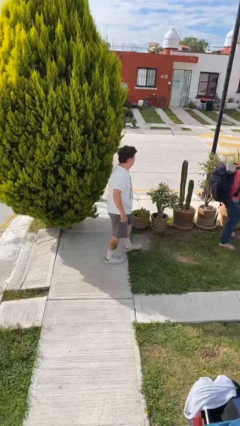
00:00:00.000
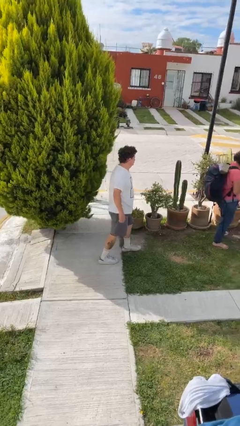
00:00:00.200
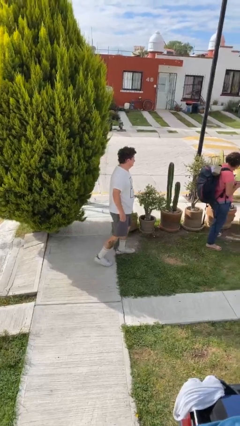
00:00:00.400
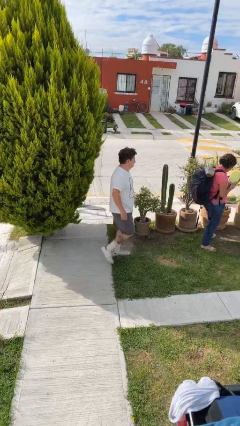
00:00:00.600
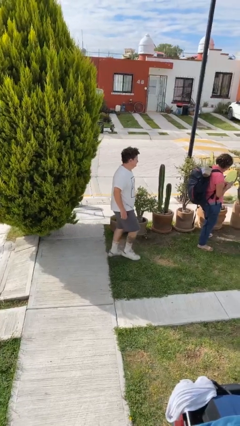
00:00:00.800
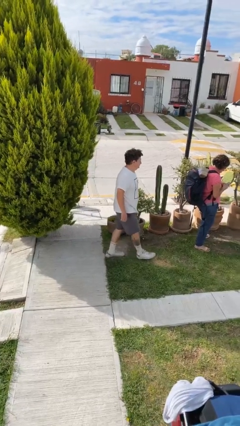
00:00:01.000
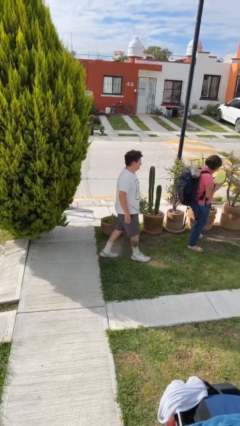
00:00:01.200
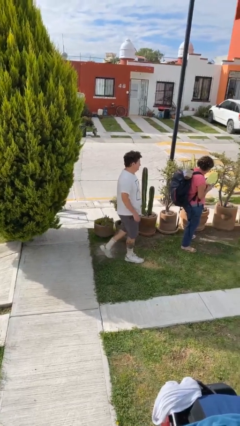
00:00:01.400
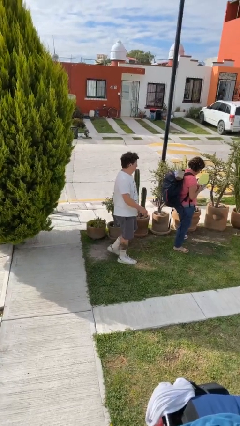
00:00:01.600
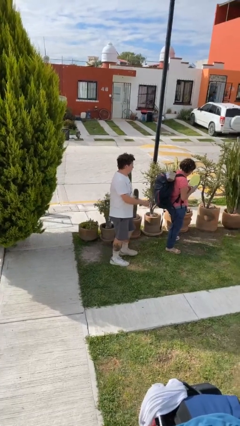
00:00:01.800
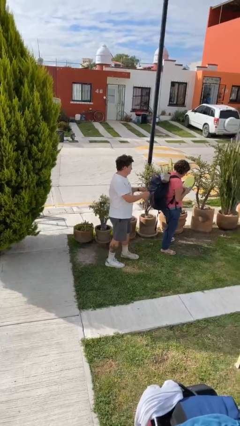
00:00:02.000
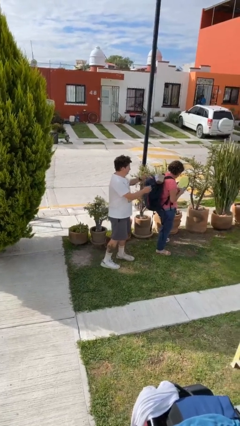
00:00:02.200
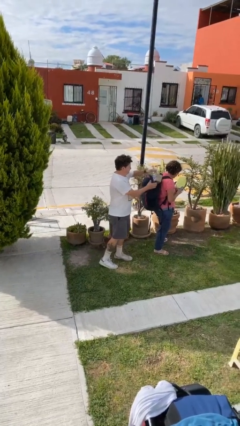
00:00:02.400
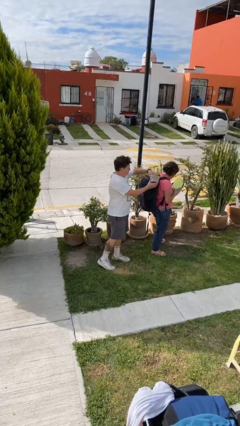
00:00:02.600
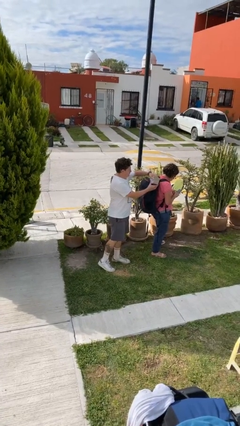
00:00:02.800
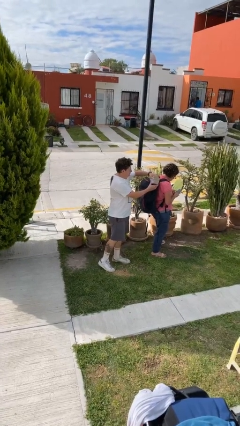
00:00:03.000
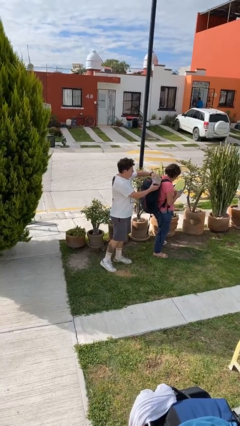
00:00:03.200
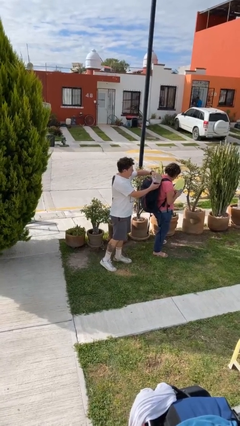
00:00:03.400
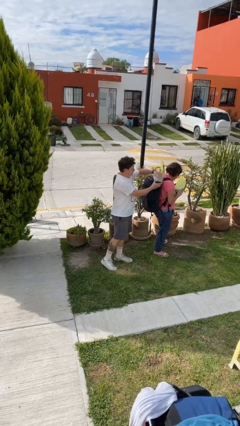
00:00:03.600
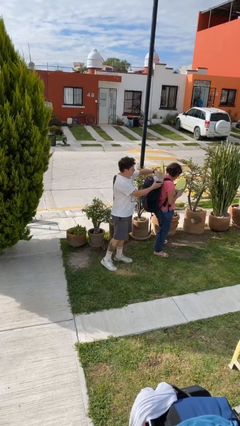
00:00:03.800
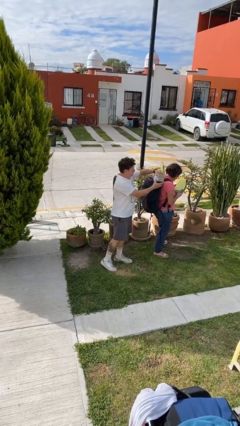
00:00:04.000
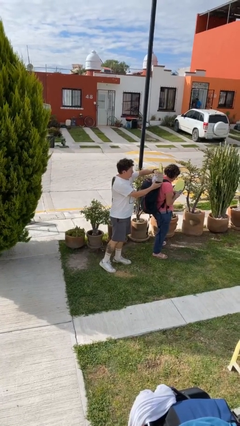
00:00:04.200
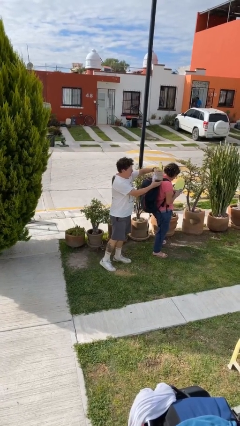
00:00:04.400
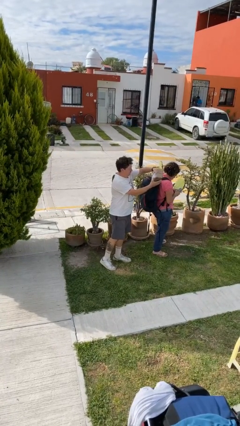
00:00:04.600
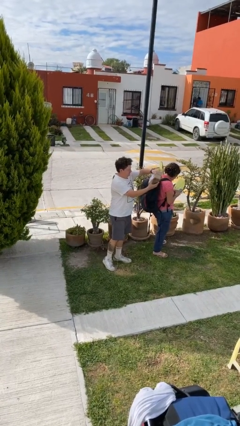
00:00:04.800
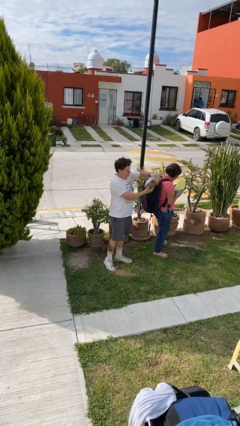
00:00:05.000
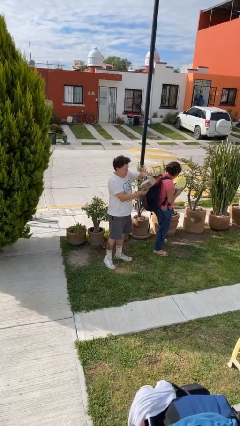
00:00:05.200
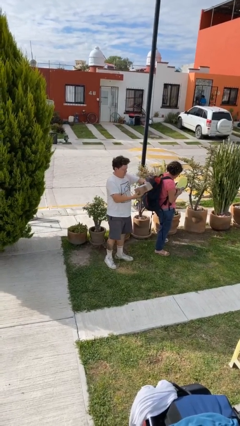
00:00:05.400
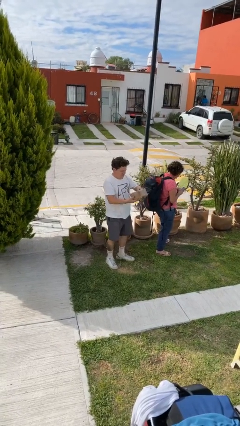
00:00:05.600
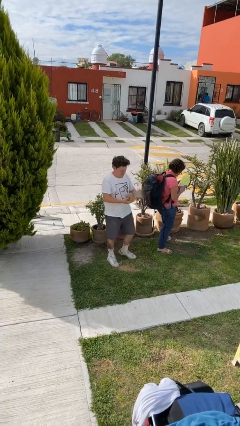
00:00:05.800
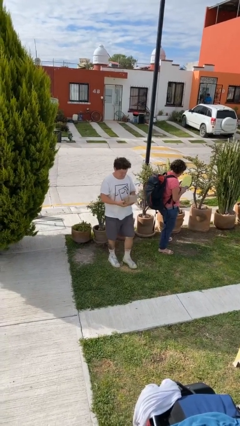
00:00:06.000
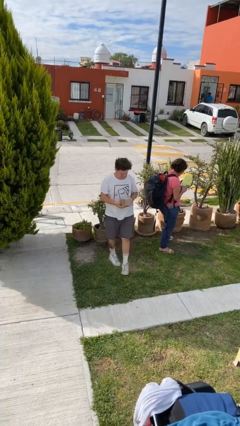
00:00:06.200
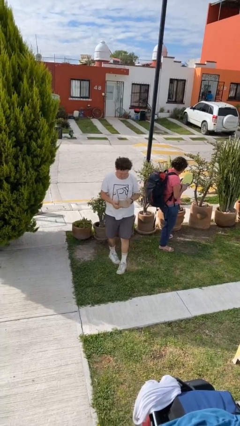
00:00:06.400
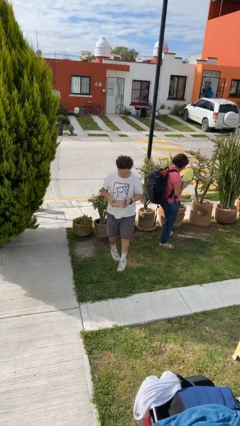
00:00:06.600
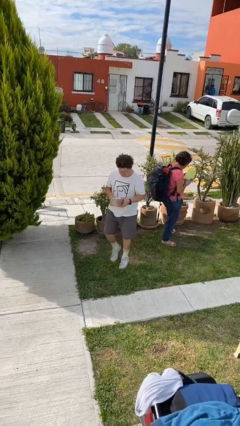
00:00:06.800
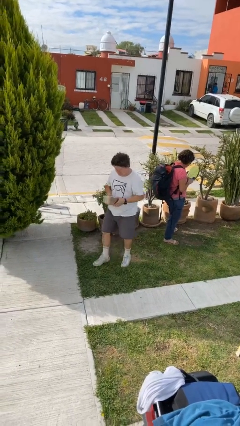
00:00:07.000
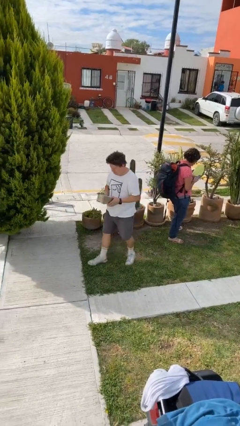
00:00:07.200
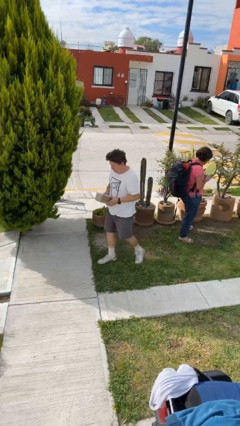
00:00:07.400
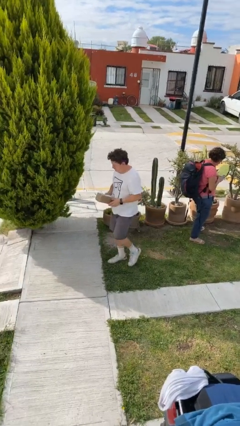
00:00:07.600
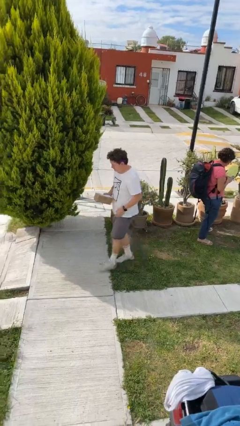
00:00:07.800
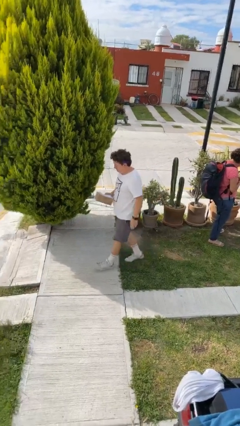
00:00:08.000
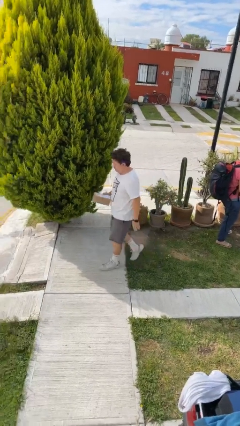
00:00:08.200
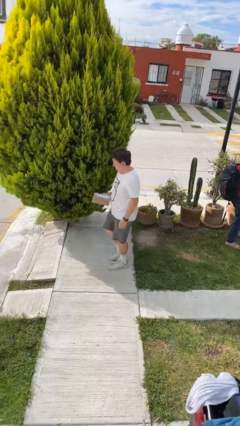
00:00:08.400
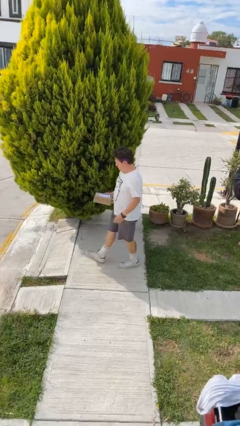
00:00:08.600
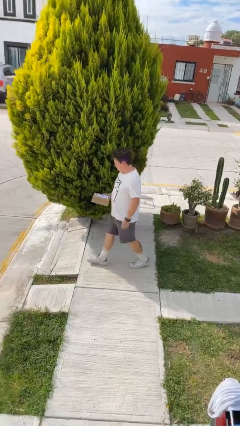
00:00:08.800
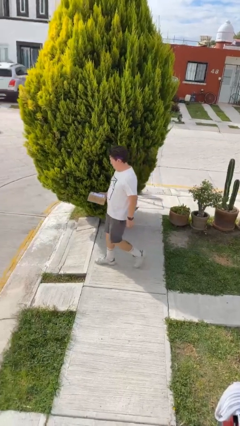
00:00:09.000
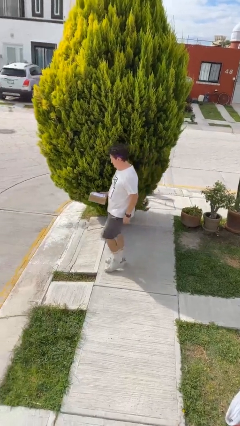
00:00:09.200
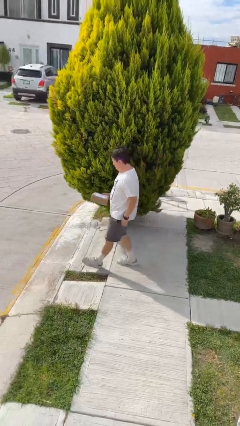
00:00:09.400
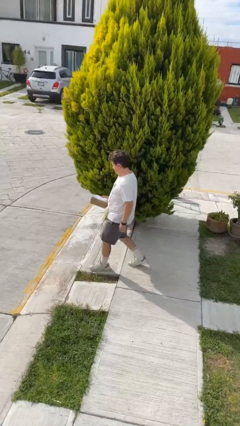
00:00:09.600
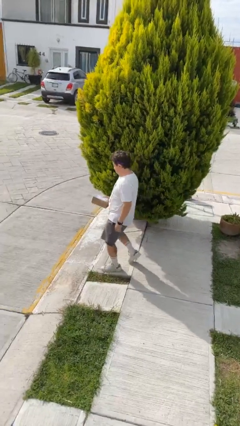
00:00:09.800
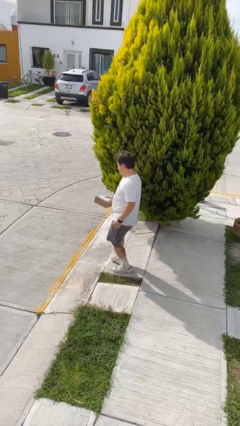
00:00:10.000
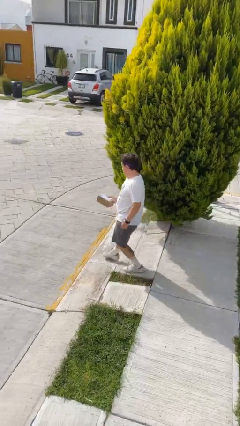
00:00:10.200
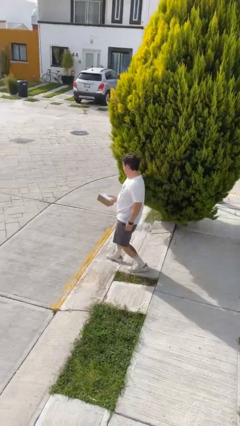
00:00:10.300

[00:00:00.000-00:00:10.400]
person steals object from person

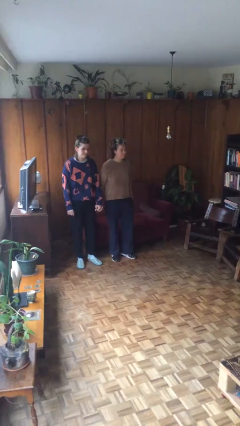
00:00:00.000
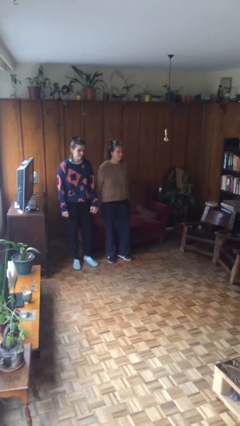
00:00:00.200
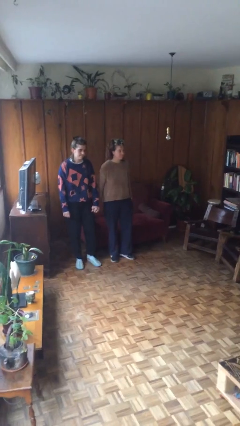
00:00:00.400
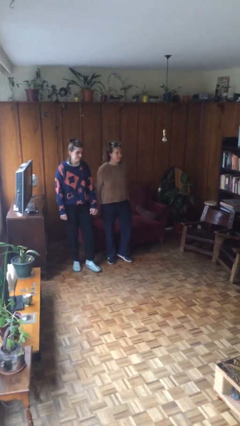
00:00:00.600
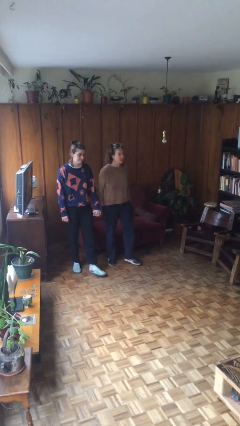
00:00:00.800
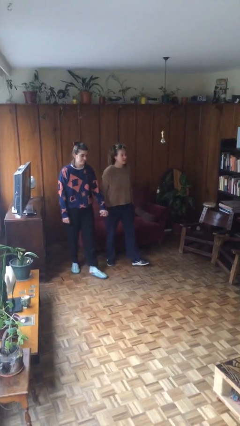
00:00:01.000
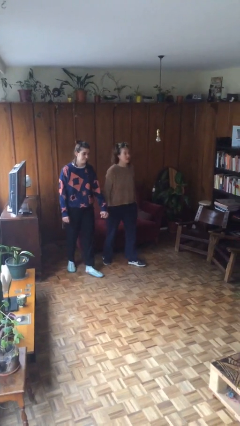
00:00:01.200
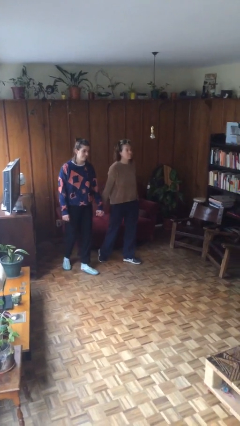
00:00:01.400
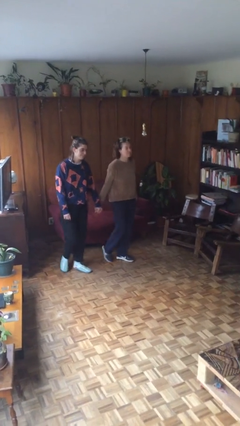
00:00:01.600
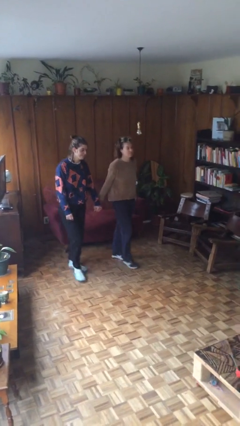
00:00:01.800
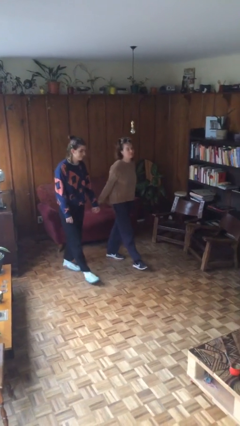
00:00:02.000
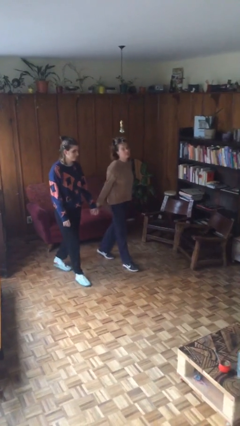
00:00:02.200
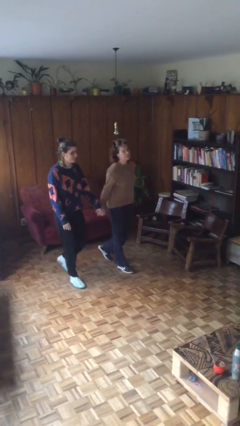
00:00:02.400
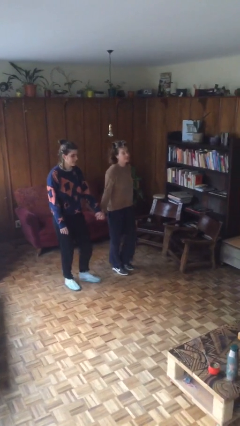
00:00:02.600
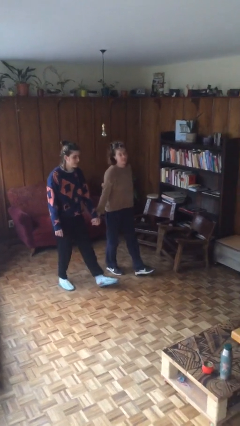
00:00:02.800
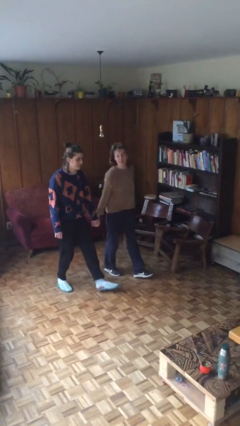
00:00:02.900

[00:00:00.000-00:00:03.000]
person holds hand

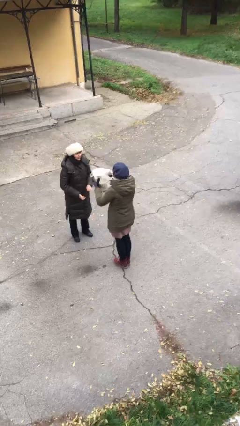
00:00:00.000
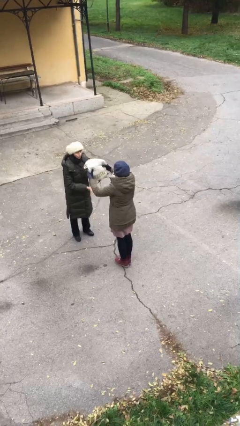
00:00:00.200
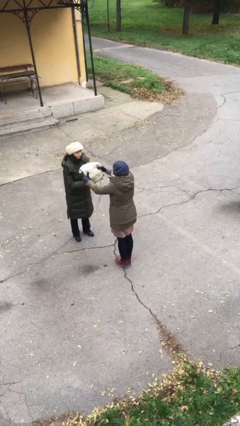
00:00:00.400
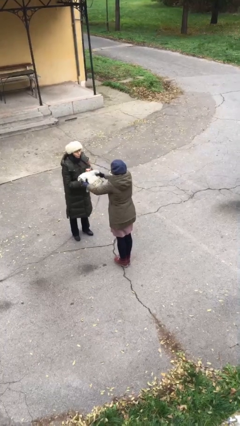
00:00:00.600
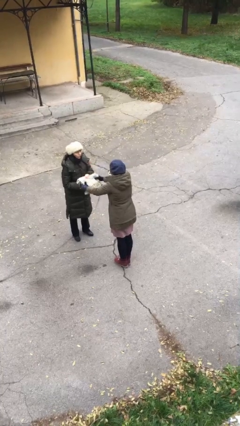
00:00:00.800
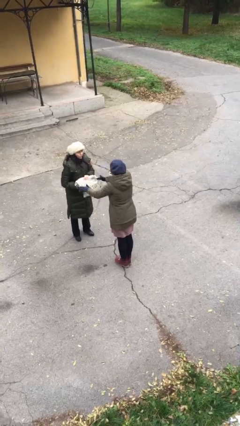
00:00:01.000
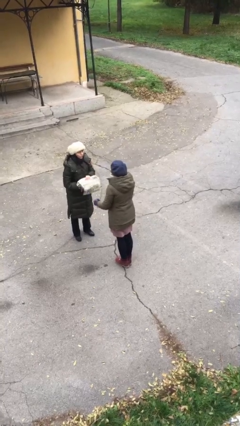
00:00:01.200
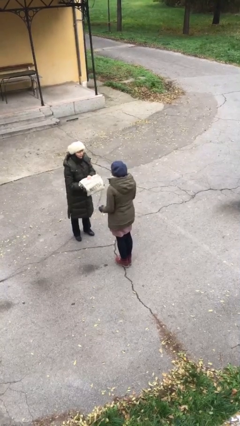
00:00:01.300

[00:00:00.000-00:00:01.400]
person transfers object to person

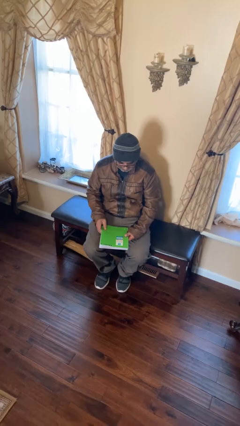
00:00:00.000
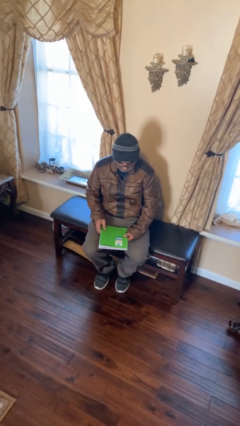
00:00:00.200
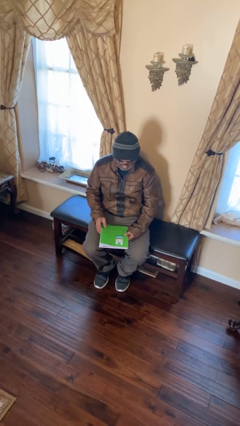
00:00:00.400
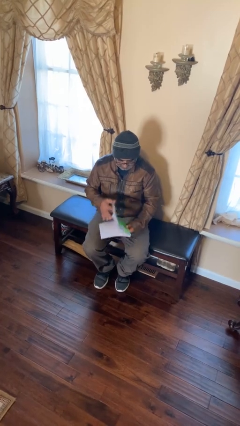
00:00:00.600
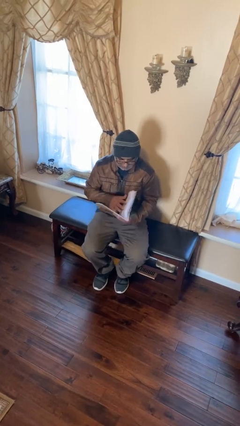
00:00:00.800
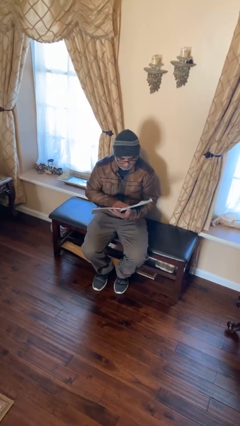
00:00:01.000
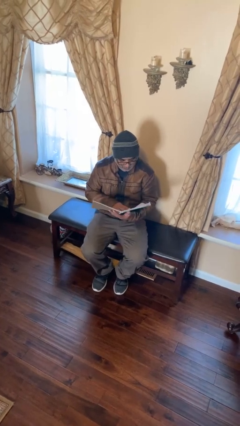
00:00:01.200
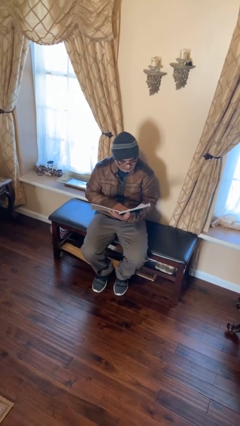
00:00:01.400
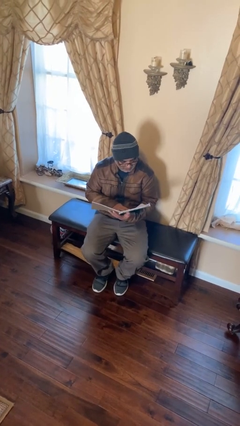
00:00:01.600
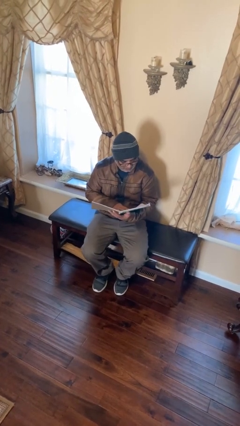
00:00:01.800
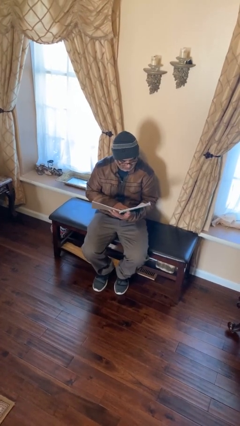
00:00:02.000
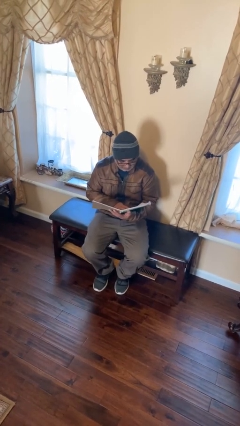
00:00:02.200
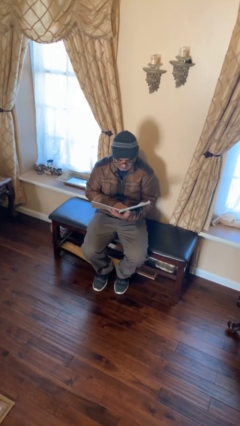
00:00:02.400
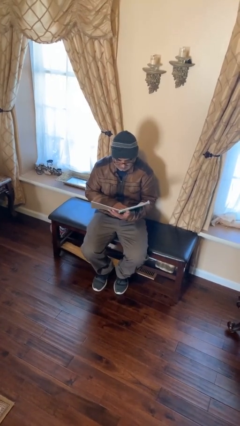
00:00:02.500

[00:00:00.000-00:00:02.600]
person reads document

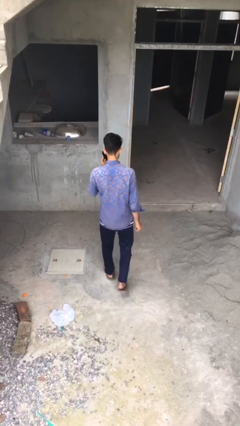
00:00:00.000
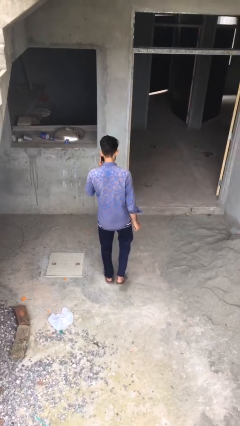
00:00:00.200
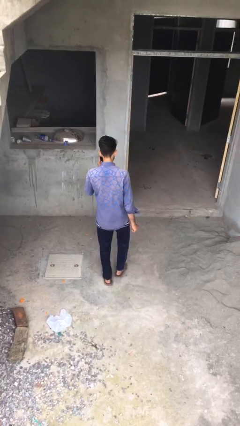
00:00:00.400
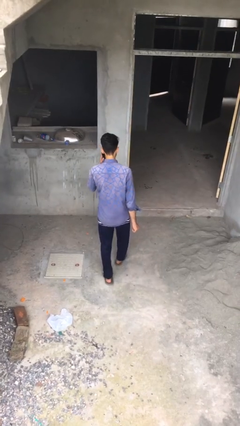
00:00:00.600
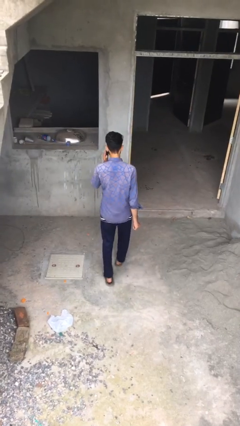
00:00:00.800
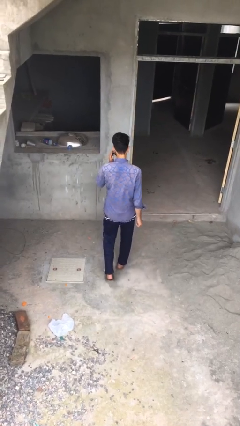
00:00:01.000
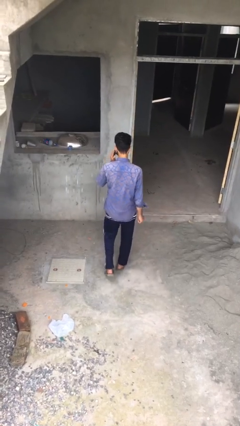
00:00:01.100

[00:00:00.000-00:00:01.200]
person talks on phone
